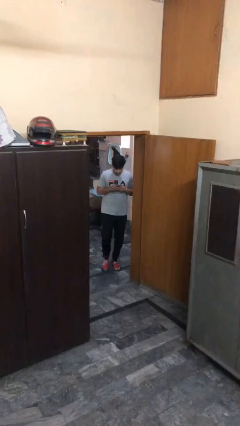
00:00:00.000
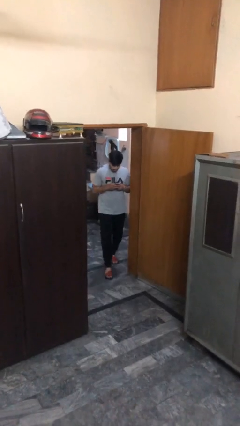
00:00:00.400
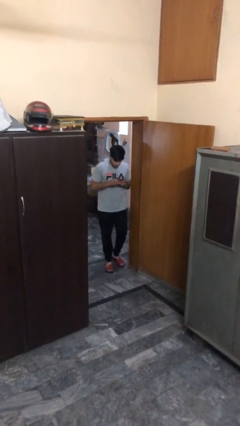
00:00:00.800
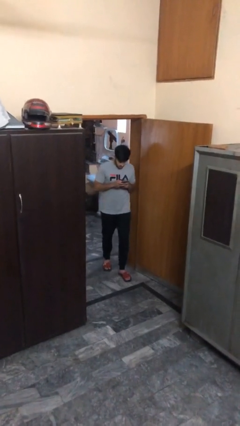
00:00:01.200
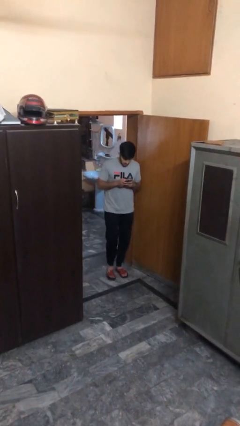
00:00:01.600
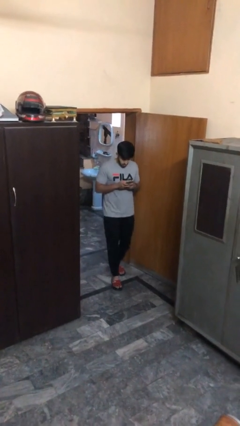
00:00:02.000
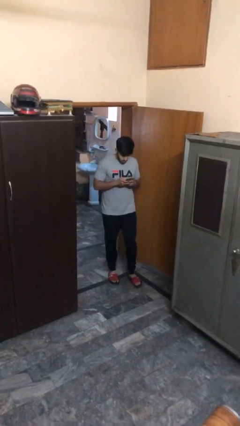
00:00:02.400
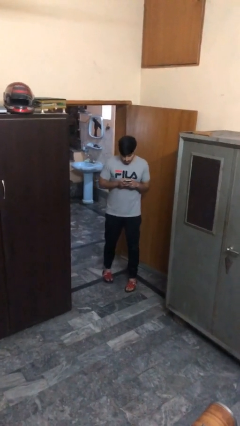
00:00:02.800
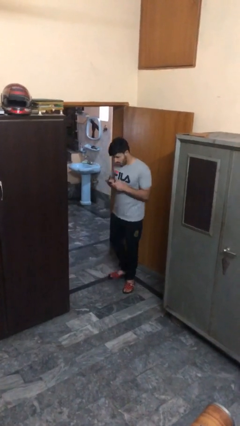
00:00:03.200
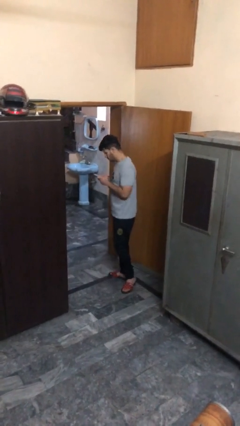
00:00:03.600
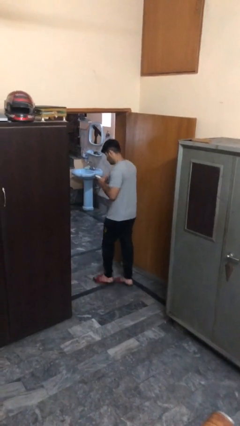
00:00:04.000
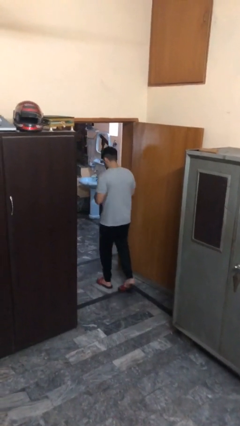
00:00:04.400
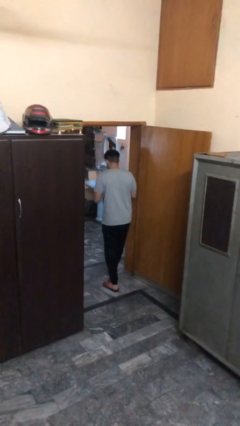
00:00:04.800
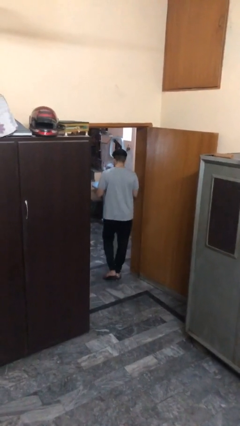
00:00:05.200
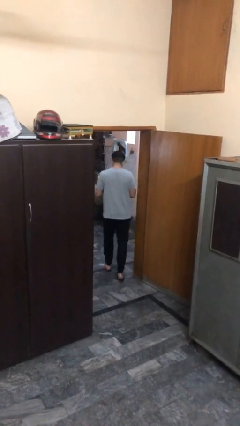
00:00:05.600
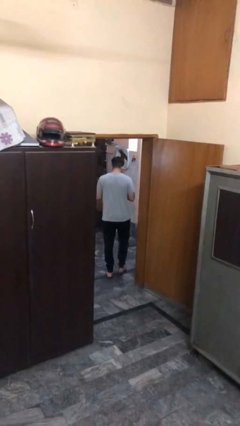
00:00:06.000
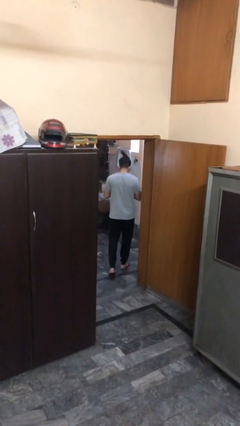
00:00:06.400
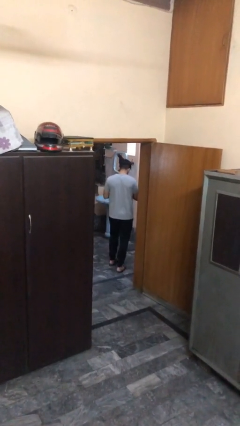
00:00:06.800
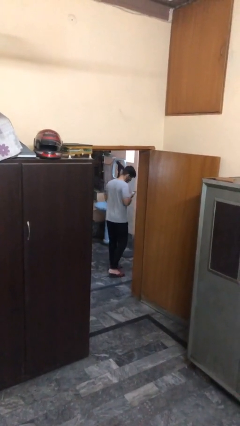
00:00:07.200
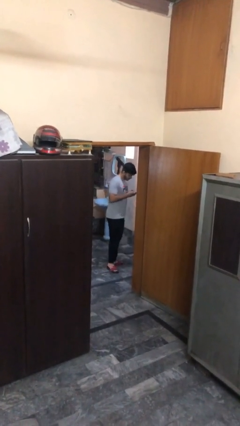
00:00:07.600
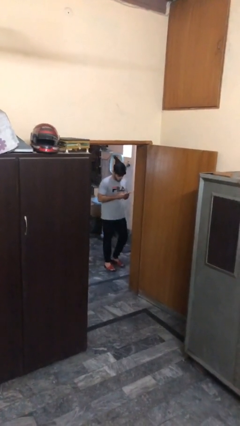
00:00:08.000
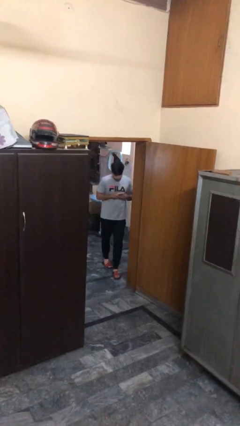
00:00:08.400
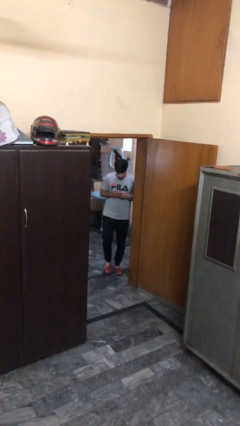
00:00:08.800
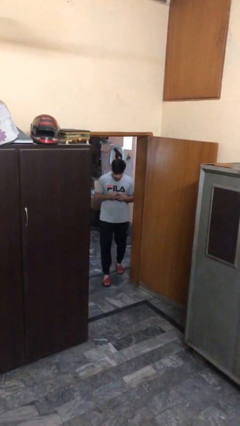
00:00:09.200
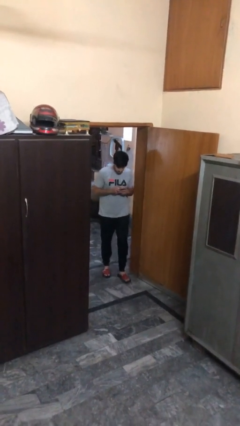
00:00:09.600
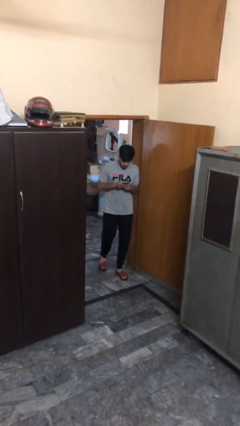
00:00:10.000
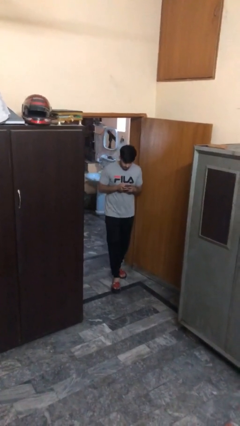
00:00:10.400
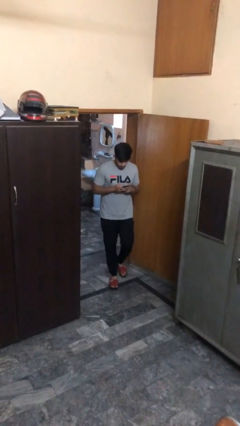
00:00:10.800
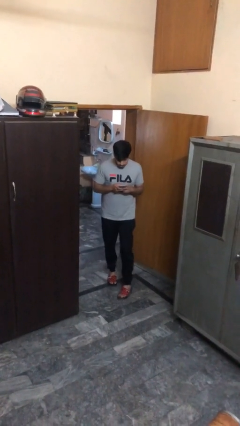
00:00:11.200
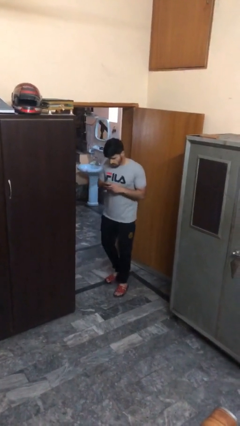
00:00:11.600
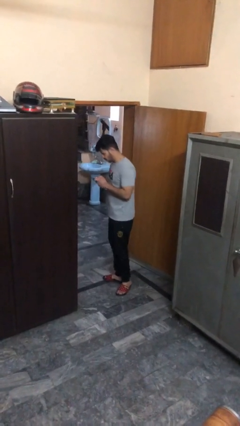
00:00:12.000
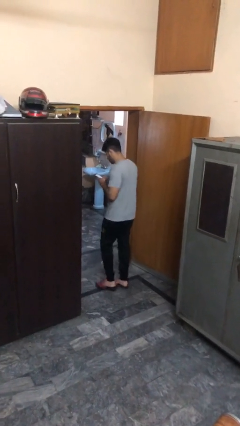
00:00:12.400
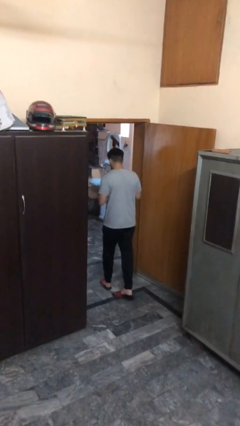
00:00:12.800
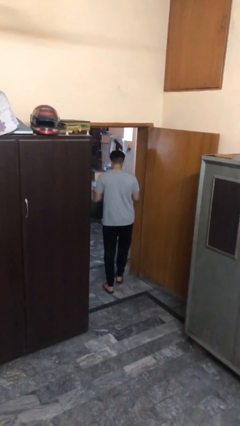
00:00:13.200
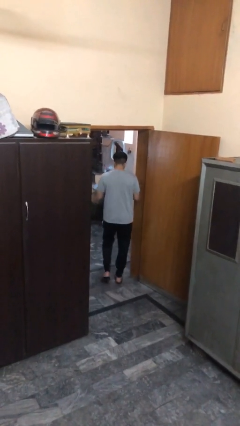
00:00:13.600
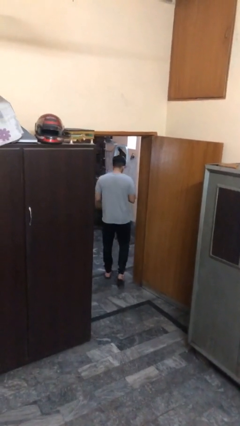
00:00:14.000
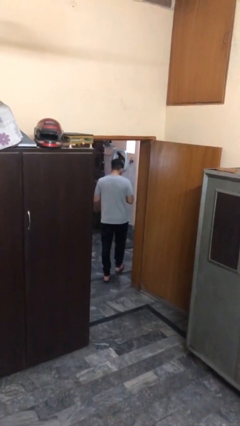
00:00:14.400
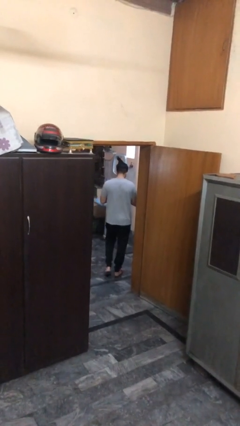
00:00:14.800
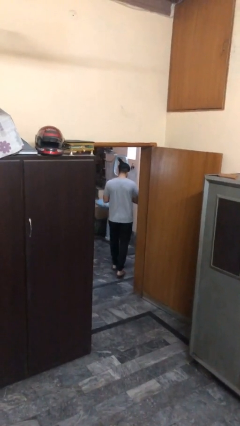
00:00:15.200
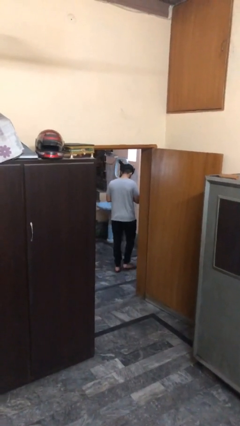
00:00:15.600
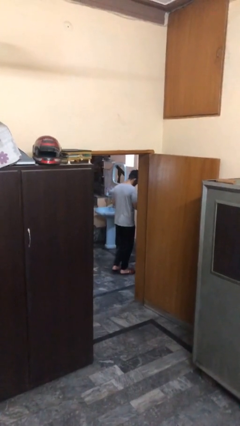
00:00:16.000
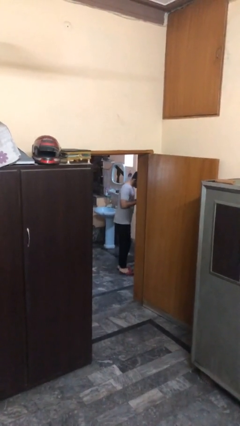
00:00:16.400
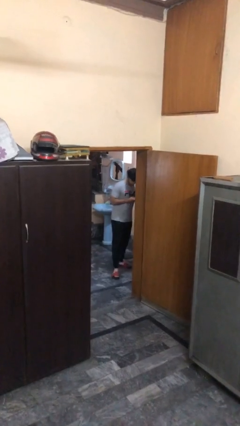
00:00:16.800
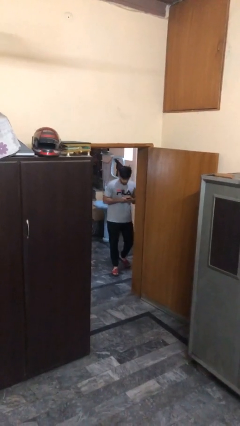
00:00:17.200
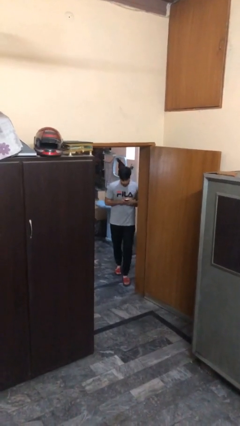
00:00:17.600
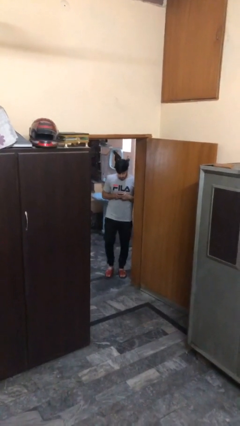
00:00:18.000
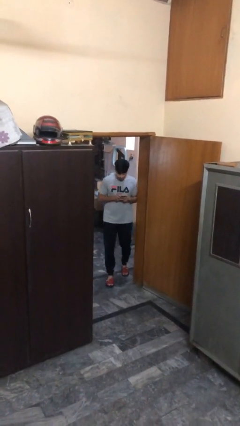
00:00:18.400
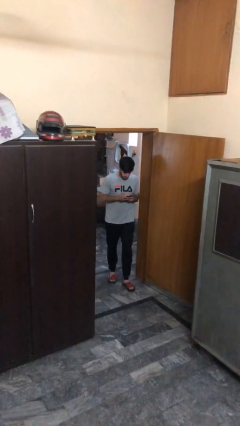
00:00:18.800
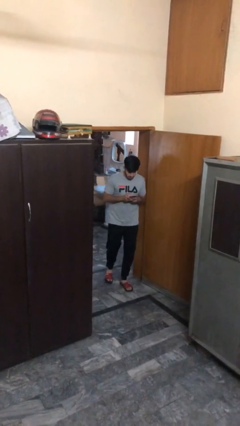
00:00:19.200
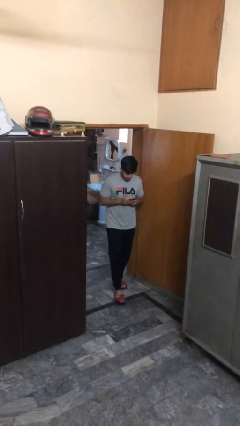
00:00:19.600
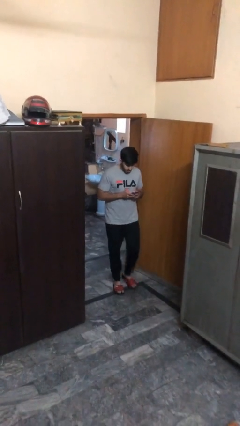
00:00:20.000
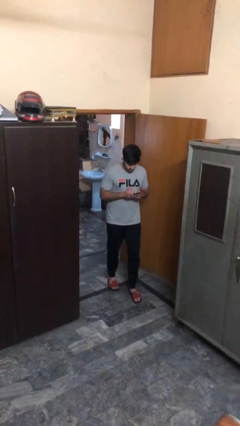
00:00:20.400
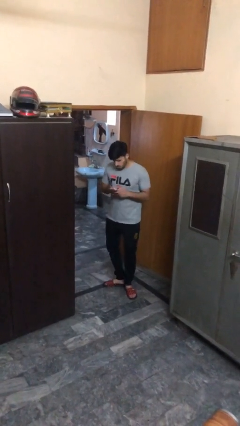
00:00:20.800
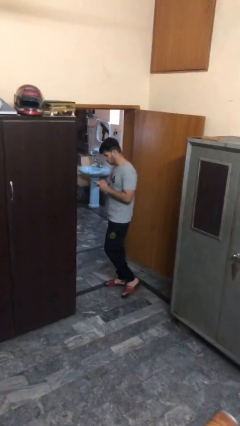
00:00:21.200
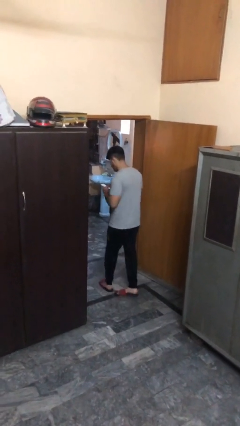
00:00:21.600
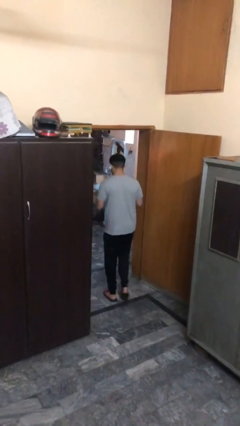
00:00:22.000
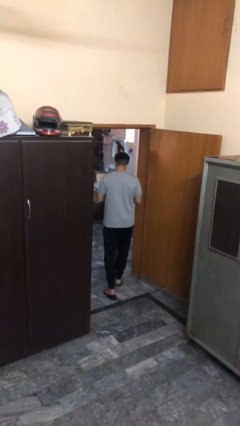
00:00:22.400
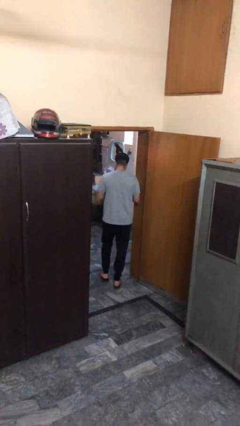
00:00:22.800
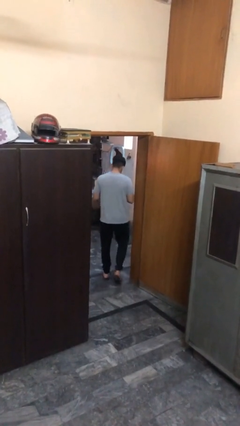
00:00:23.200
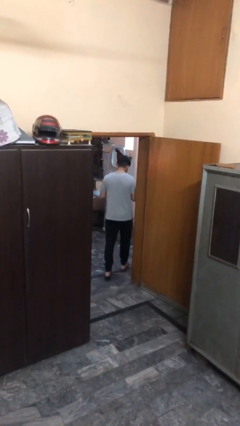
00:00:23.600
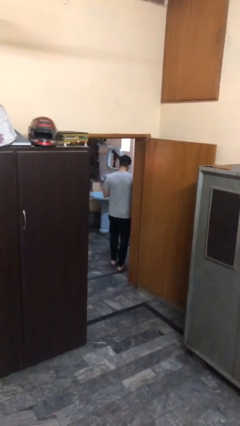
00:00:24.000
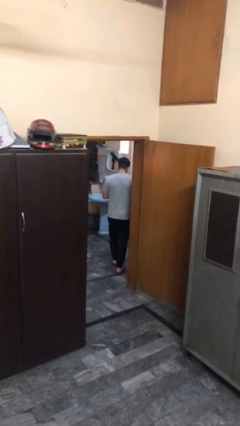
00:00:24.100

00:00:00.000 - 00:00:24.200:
person texts on phone

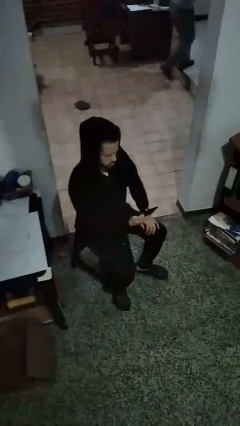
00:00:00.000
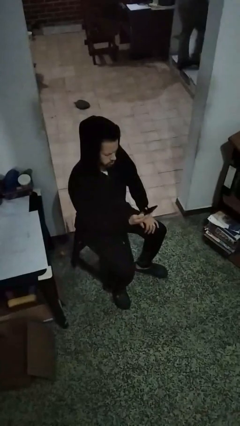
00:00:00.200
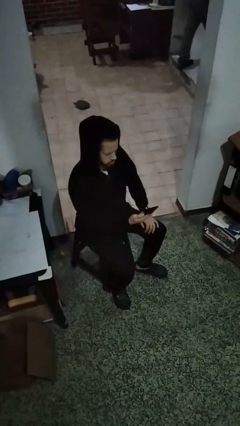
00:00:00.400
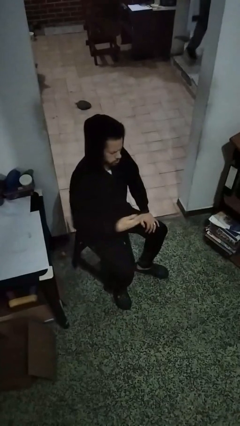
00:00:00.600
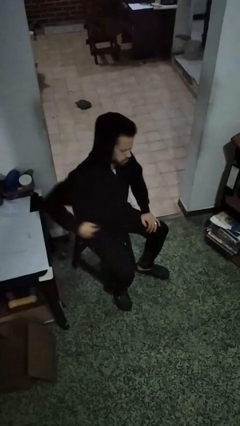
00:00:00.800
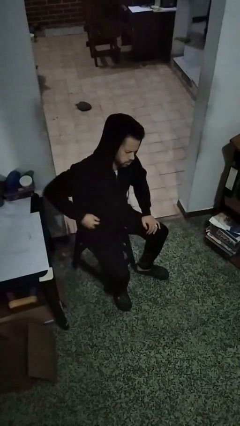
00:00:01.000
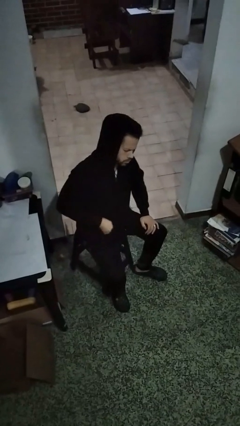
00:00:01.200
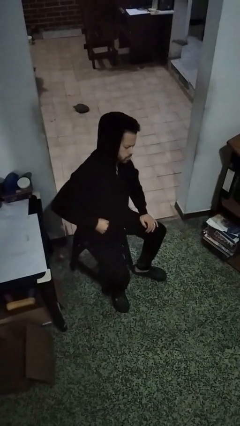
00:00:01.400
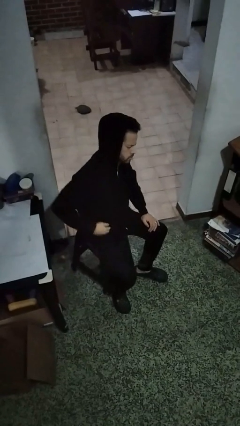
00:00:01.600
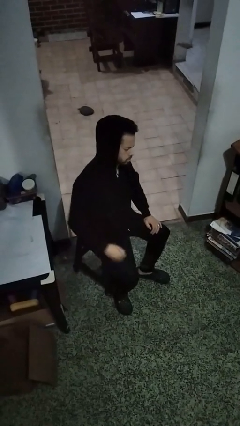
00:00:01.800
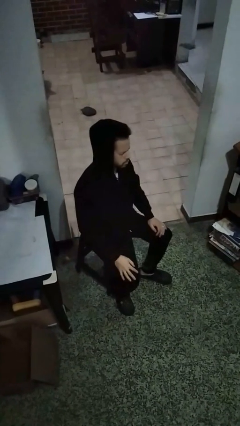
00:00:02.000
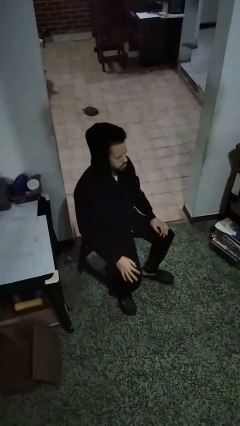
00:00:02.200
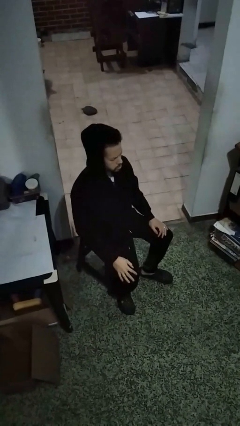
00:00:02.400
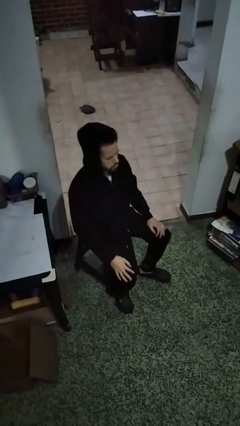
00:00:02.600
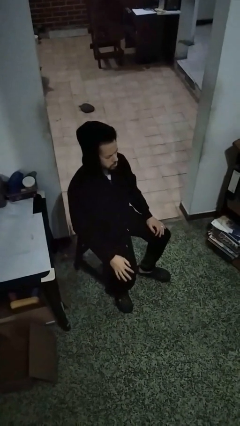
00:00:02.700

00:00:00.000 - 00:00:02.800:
person puts phone into pocket

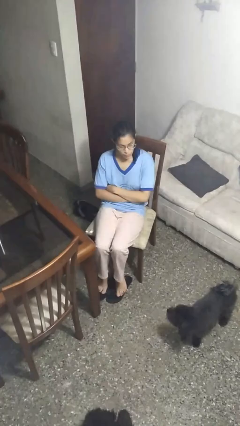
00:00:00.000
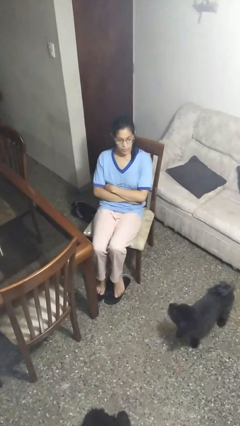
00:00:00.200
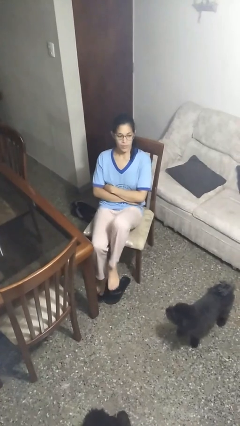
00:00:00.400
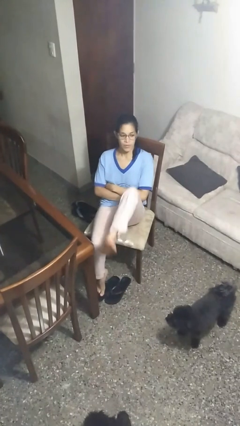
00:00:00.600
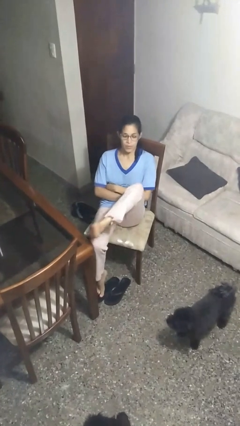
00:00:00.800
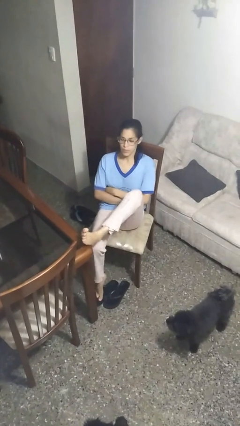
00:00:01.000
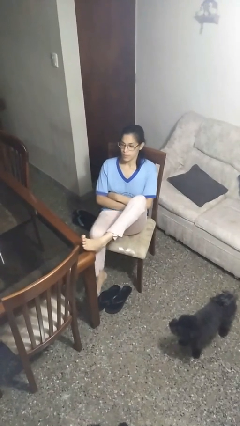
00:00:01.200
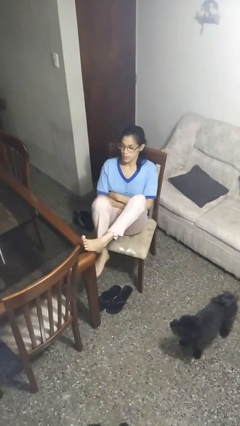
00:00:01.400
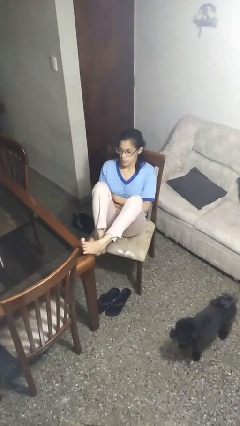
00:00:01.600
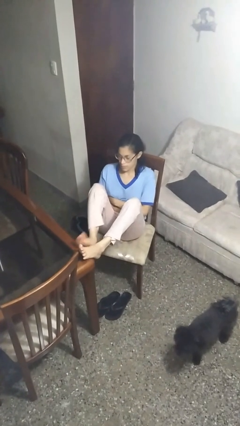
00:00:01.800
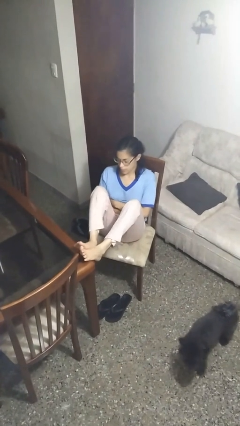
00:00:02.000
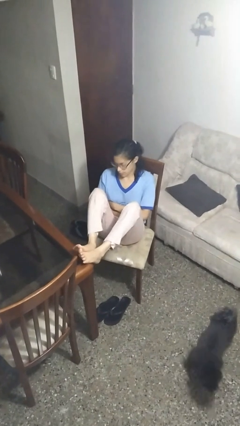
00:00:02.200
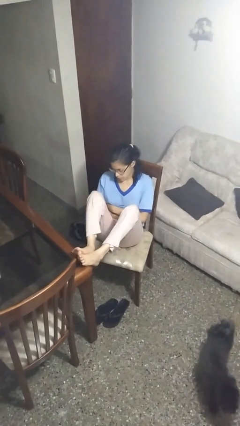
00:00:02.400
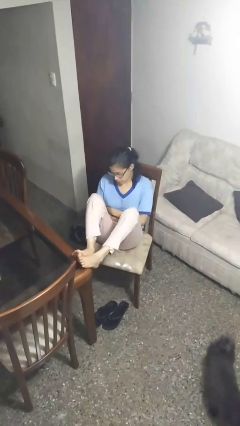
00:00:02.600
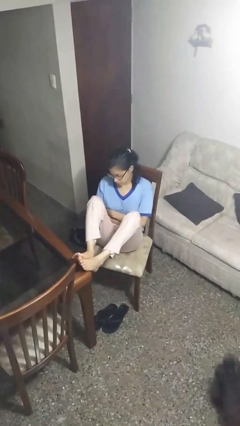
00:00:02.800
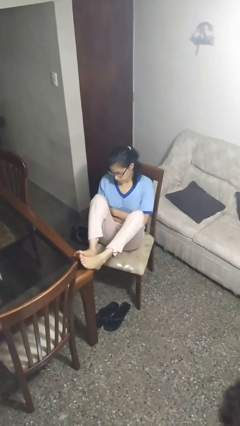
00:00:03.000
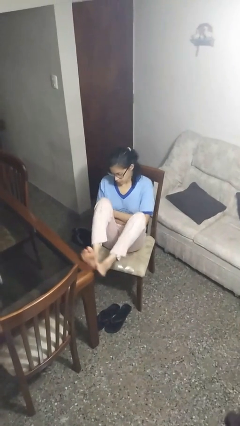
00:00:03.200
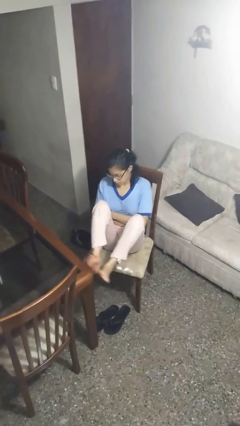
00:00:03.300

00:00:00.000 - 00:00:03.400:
person puts feet up
